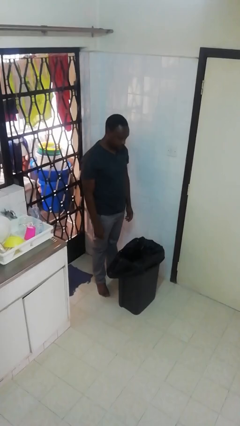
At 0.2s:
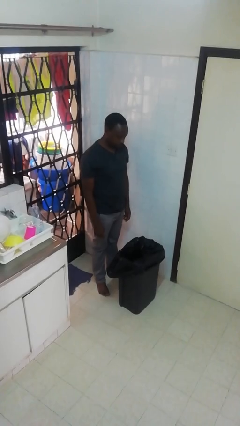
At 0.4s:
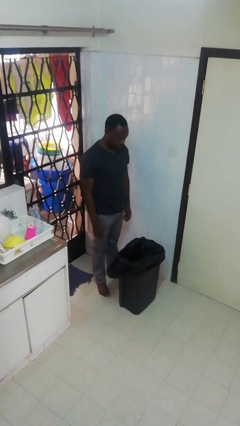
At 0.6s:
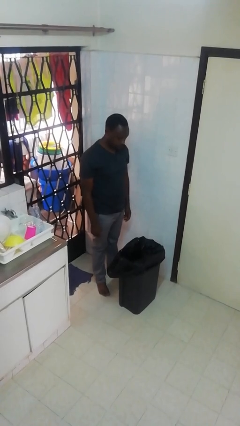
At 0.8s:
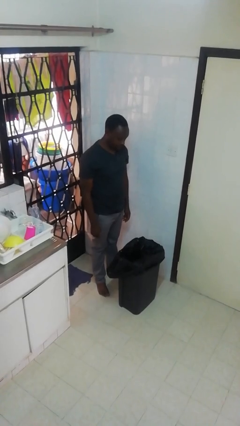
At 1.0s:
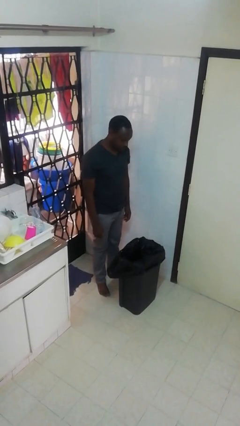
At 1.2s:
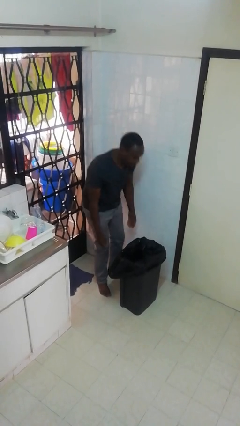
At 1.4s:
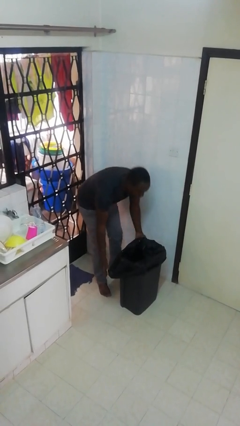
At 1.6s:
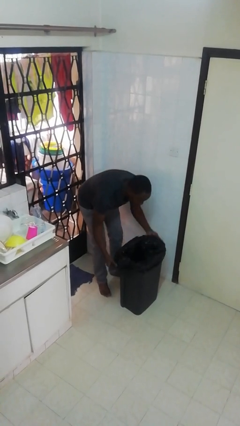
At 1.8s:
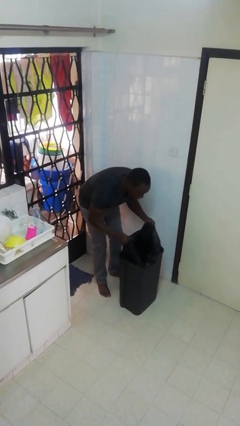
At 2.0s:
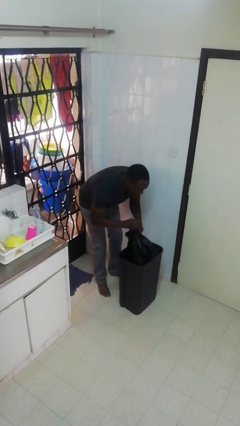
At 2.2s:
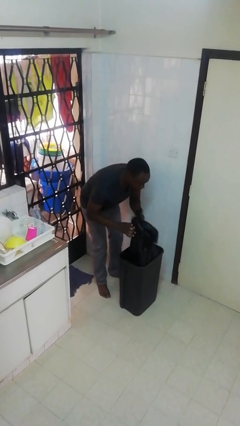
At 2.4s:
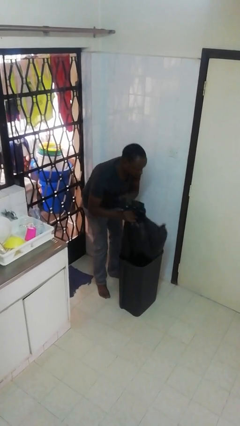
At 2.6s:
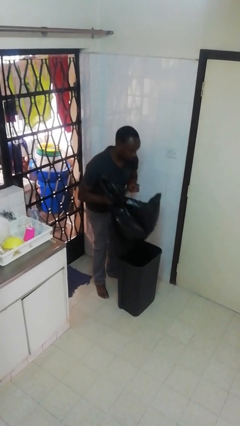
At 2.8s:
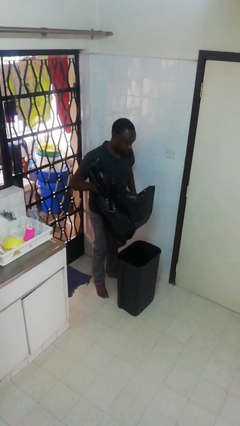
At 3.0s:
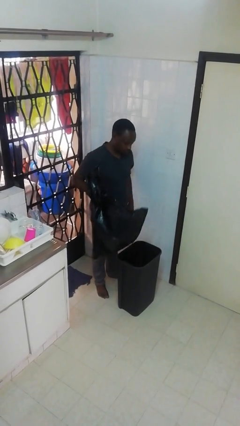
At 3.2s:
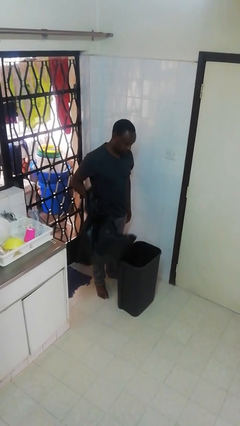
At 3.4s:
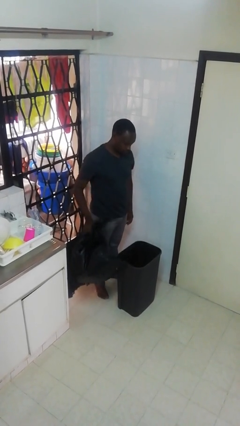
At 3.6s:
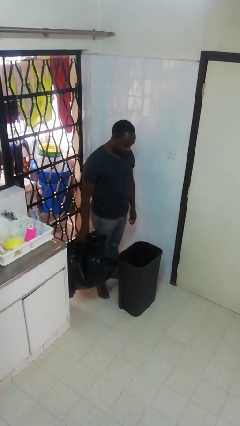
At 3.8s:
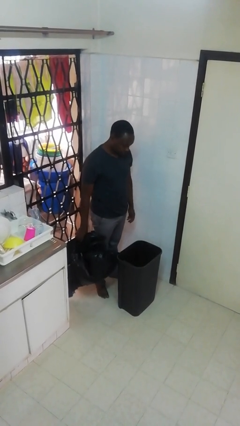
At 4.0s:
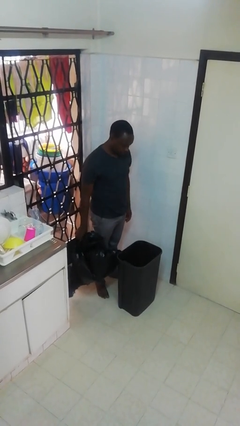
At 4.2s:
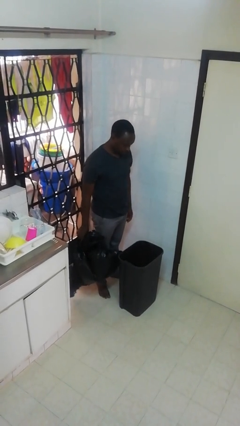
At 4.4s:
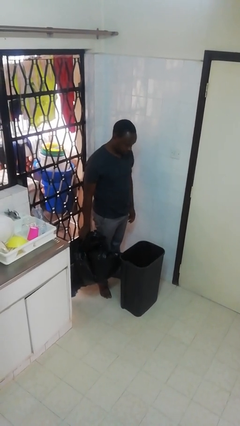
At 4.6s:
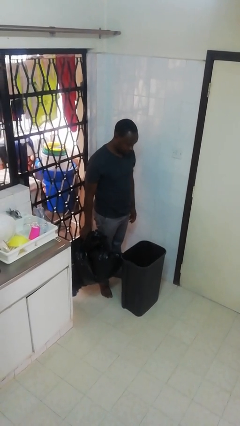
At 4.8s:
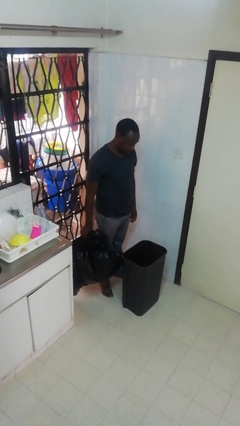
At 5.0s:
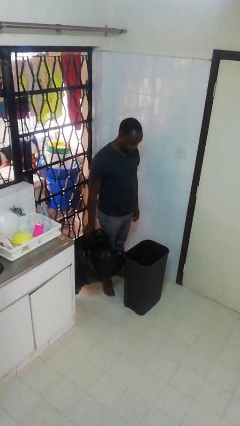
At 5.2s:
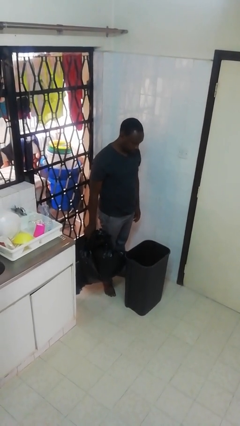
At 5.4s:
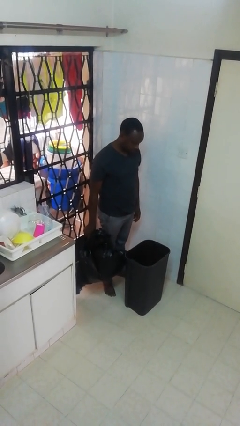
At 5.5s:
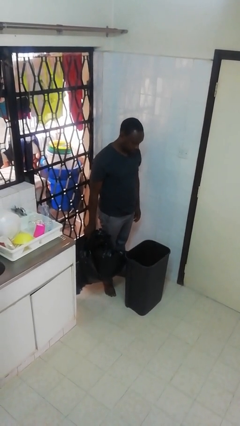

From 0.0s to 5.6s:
person removes trashbag from trashcan

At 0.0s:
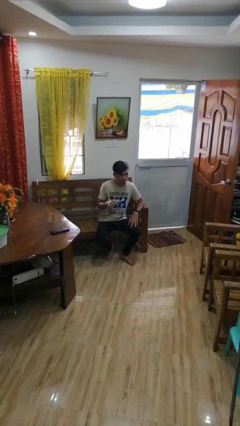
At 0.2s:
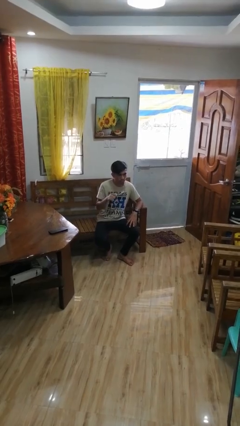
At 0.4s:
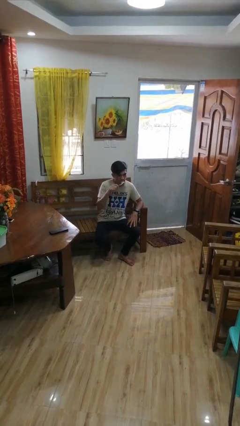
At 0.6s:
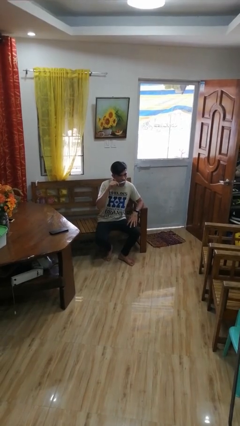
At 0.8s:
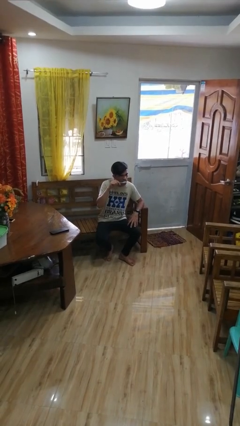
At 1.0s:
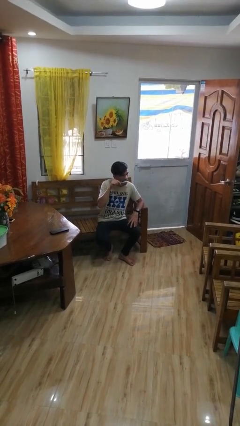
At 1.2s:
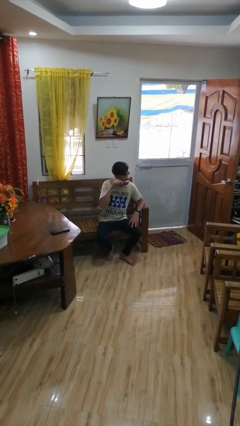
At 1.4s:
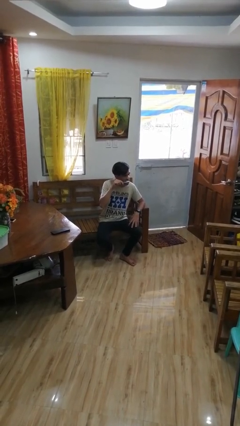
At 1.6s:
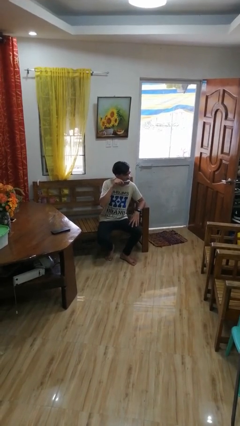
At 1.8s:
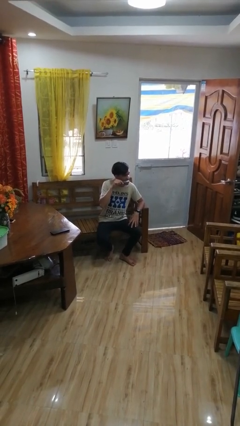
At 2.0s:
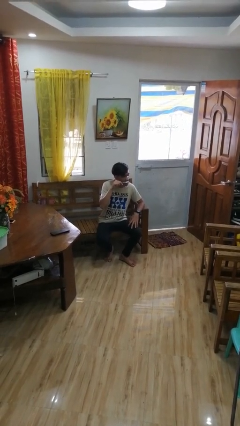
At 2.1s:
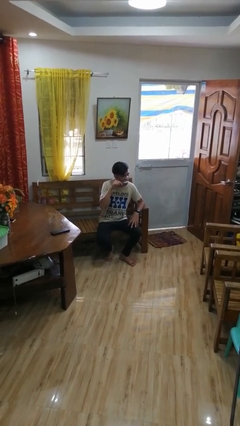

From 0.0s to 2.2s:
person brushes teeth

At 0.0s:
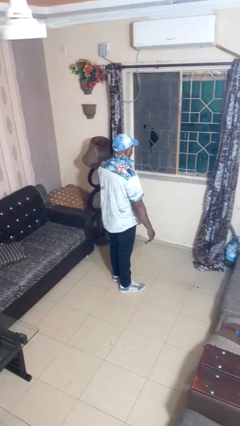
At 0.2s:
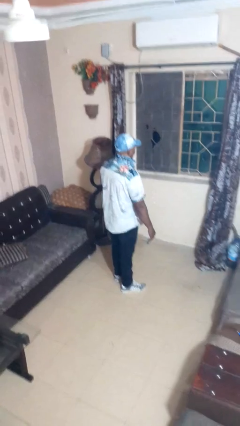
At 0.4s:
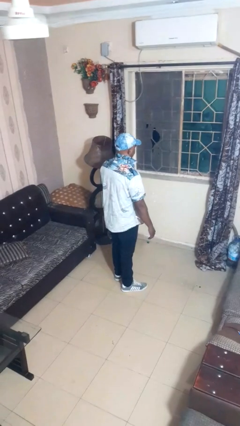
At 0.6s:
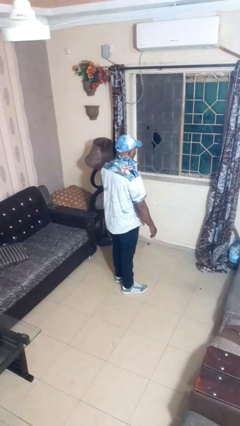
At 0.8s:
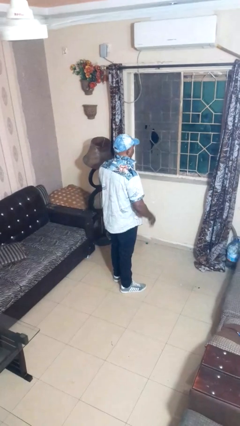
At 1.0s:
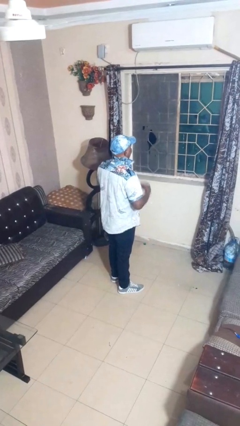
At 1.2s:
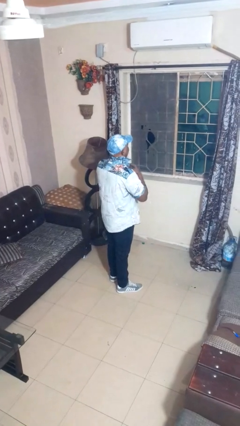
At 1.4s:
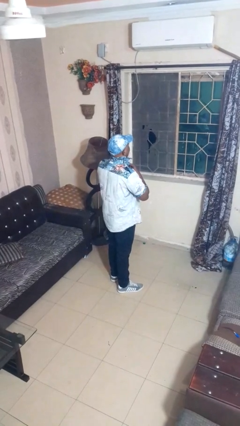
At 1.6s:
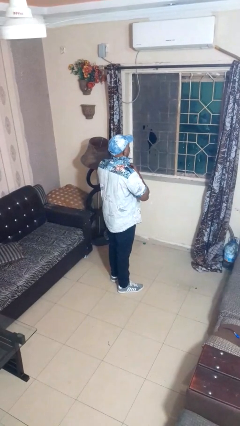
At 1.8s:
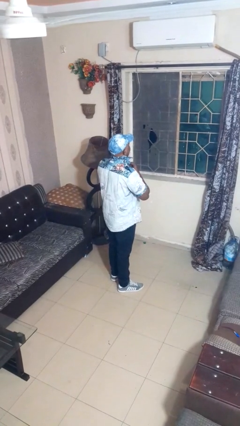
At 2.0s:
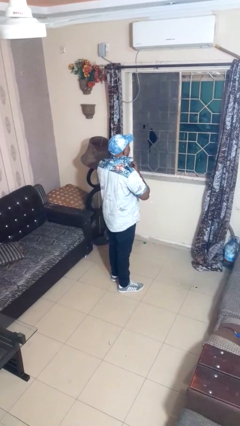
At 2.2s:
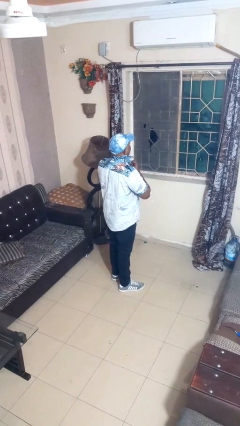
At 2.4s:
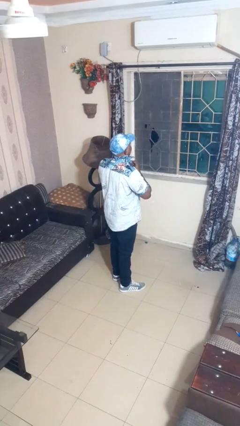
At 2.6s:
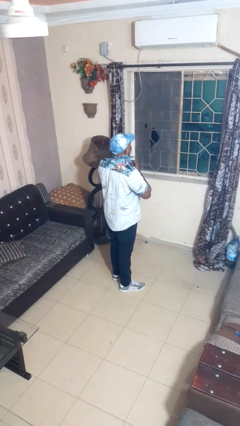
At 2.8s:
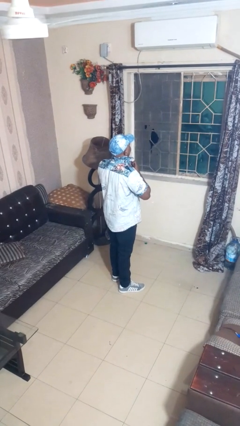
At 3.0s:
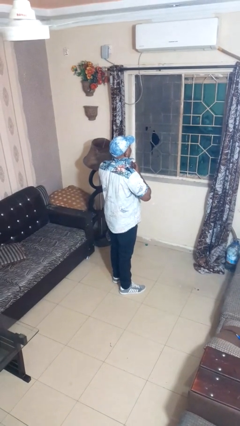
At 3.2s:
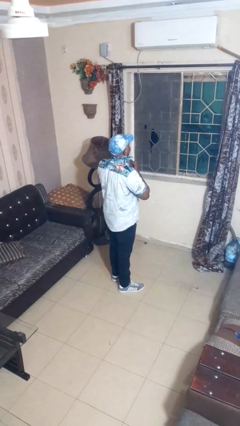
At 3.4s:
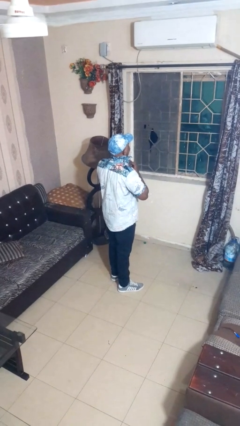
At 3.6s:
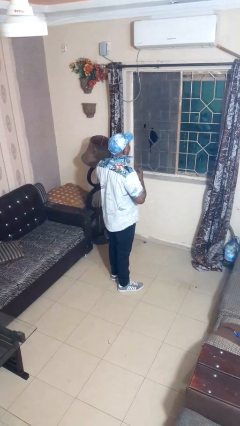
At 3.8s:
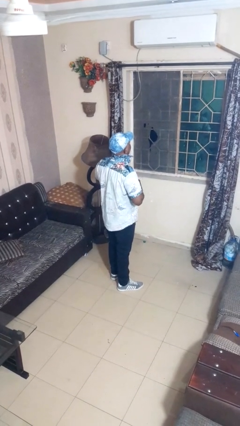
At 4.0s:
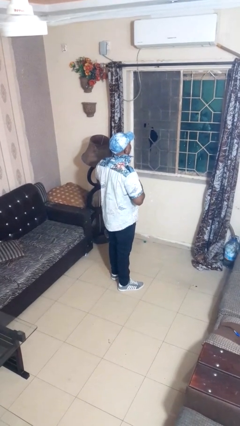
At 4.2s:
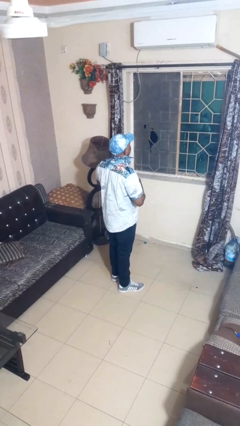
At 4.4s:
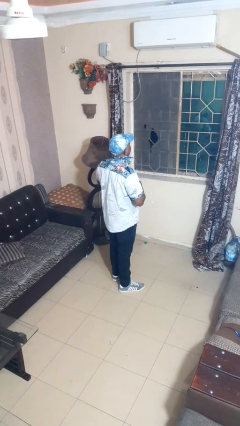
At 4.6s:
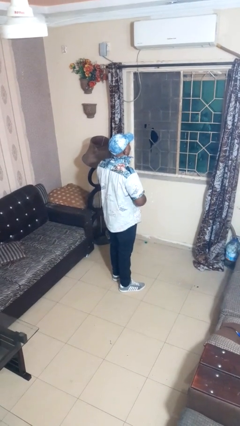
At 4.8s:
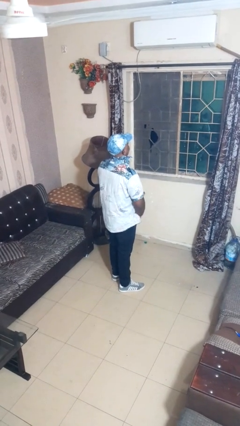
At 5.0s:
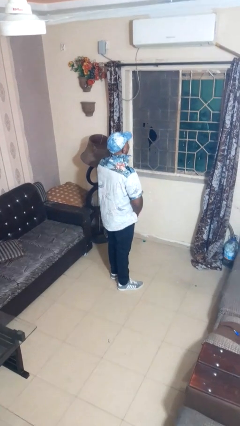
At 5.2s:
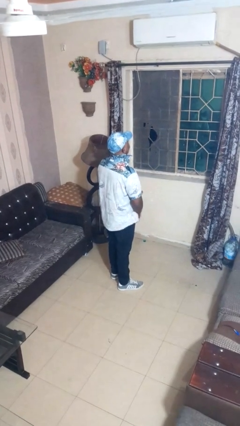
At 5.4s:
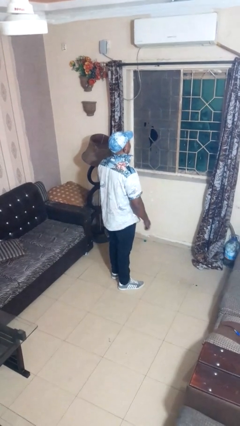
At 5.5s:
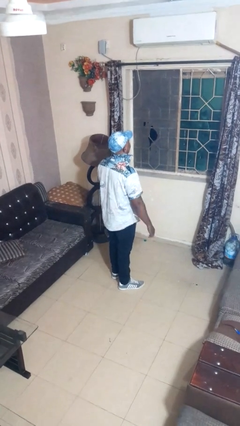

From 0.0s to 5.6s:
person unbuttons shirt

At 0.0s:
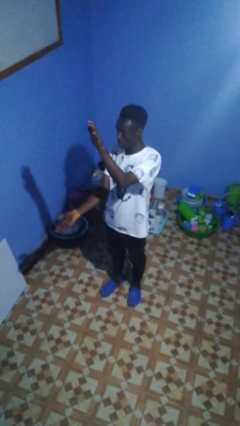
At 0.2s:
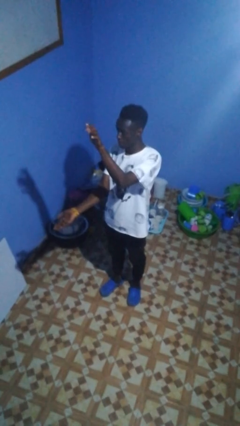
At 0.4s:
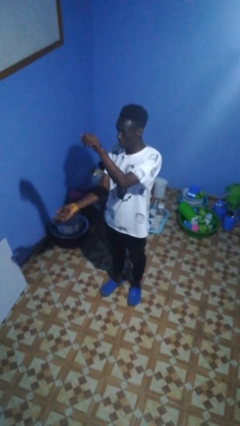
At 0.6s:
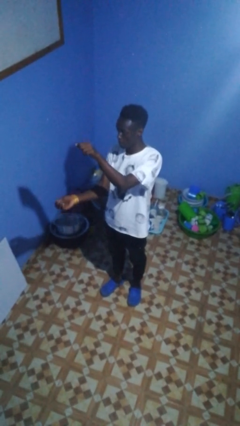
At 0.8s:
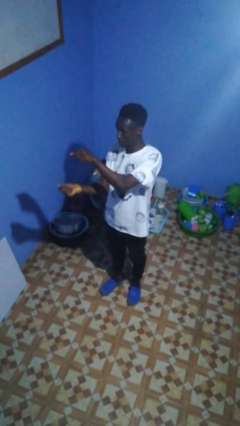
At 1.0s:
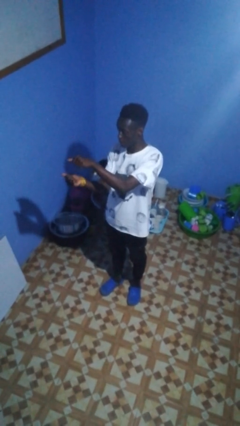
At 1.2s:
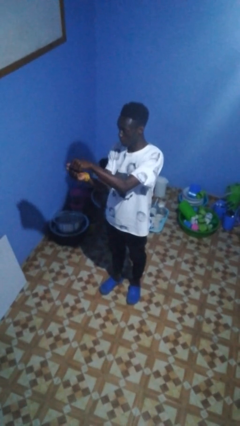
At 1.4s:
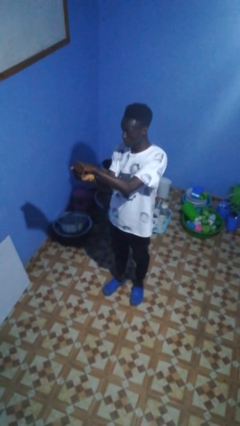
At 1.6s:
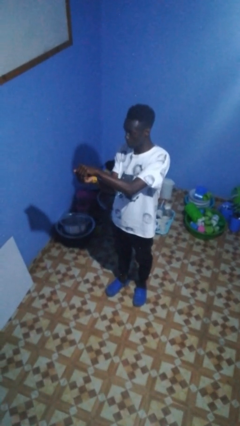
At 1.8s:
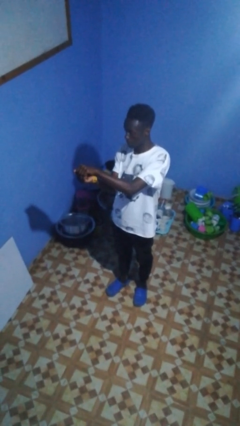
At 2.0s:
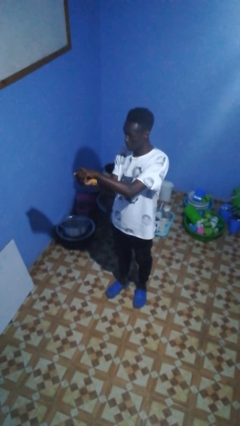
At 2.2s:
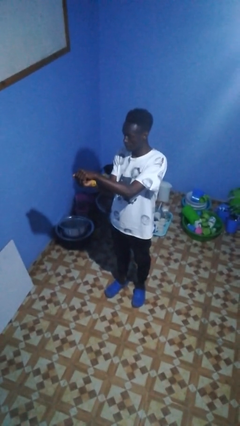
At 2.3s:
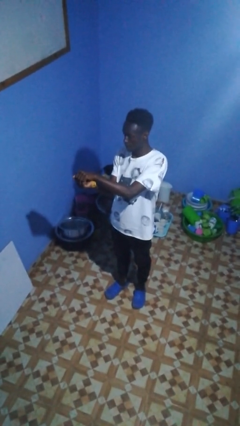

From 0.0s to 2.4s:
person gestures zoom out

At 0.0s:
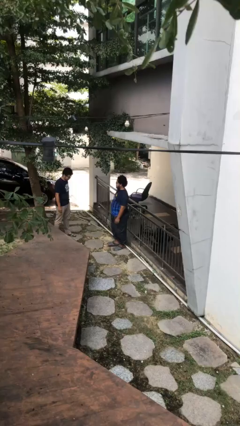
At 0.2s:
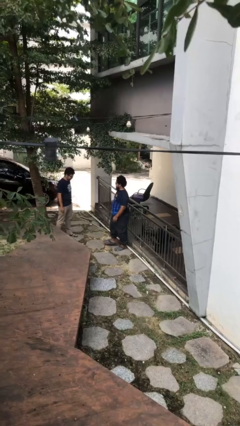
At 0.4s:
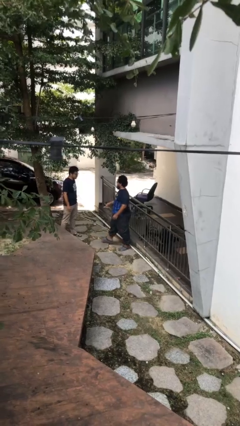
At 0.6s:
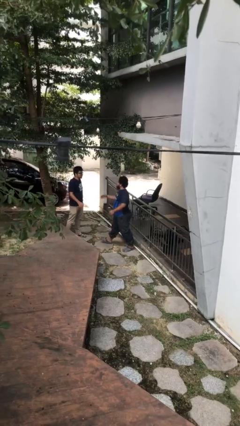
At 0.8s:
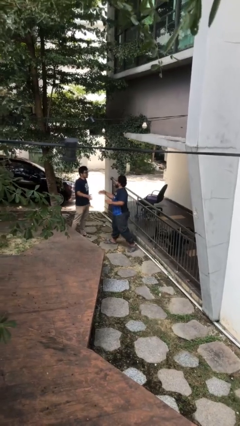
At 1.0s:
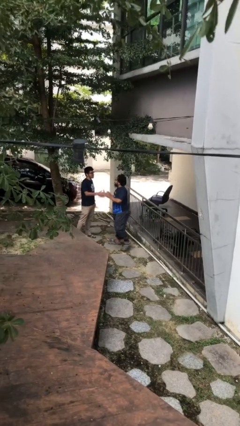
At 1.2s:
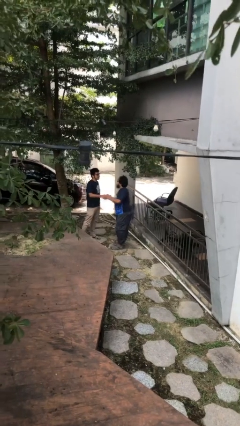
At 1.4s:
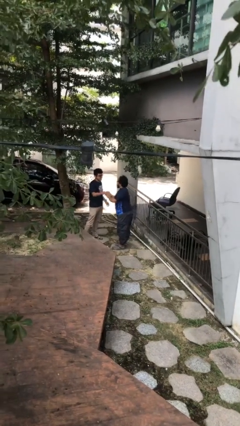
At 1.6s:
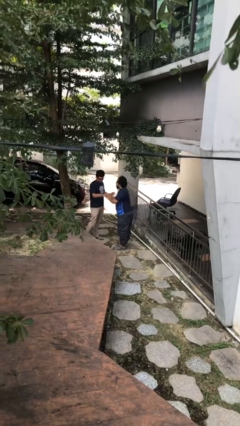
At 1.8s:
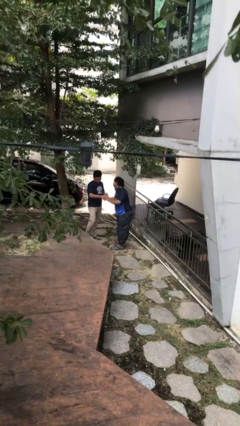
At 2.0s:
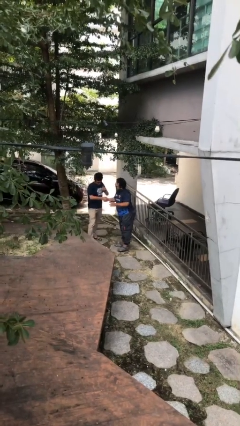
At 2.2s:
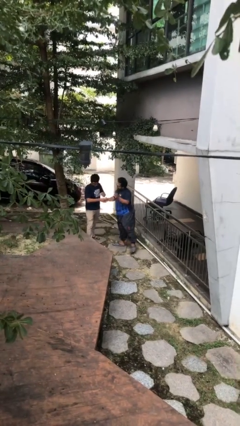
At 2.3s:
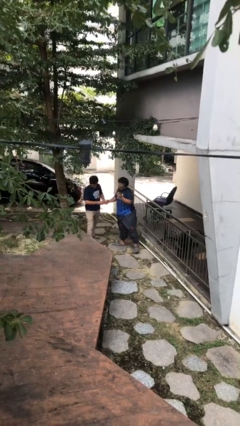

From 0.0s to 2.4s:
person shakes hand
